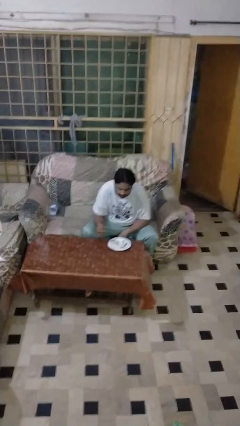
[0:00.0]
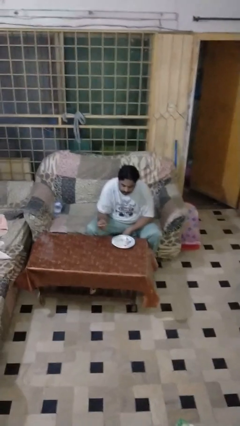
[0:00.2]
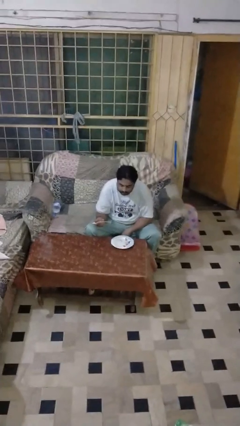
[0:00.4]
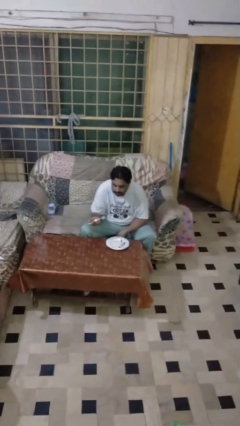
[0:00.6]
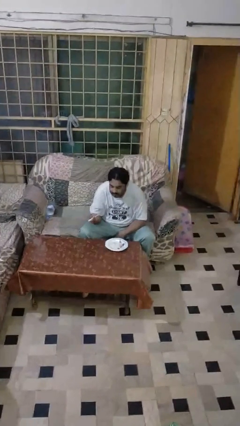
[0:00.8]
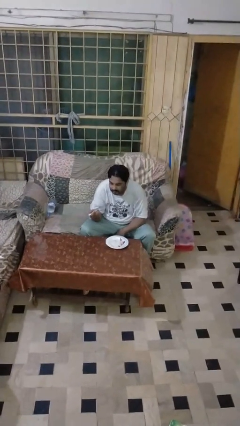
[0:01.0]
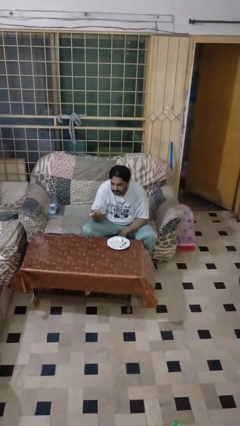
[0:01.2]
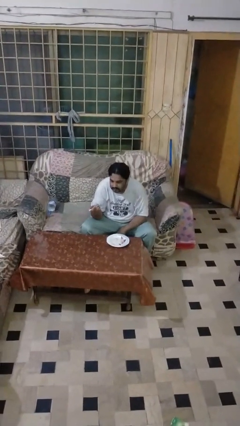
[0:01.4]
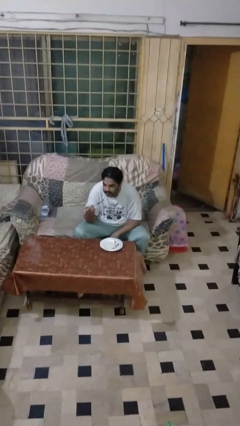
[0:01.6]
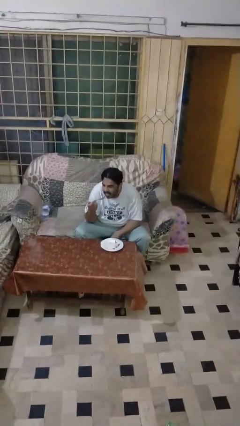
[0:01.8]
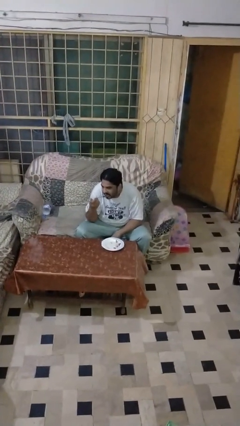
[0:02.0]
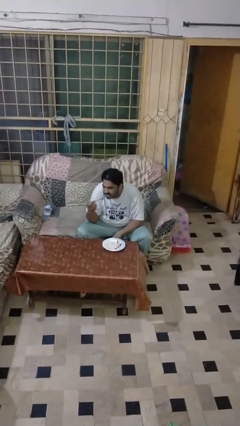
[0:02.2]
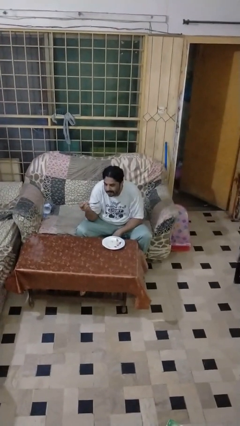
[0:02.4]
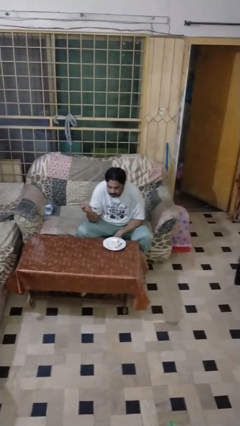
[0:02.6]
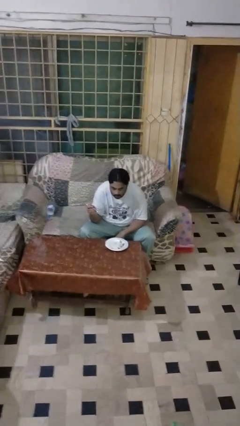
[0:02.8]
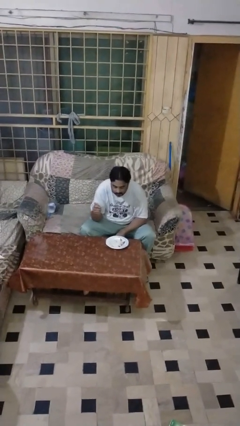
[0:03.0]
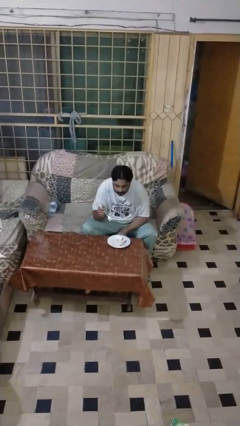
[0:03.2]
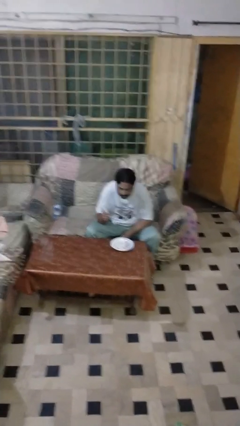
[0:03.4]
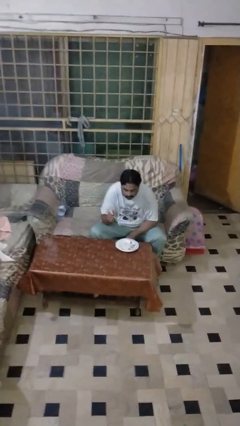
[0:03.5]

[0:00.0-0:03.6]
person eats with utensil

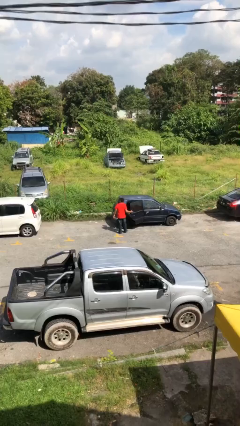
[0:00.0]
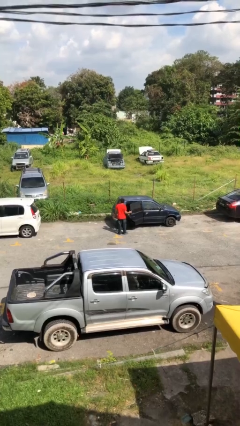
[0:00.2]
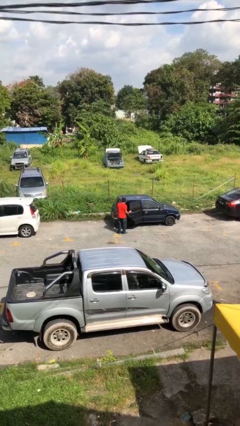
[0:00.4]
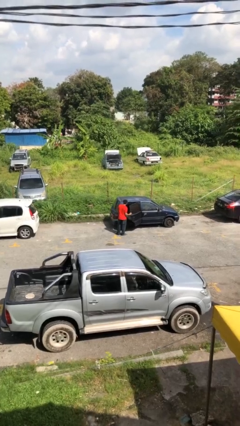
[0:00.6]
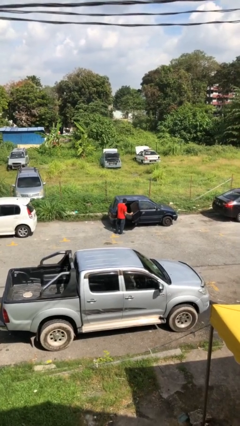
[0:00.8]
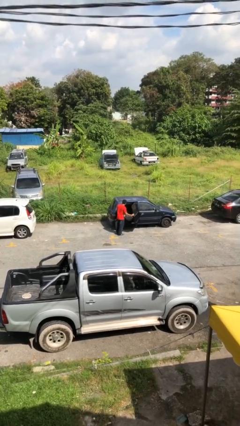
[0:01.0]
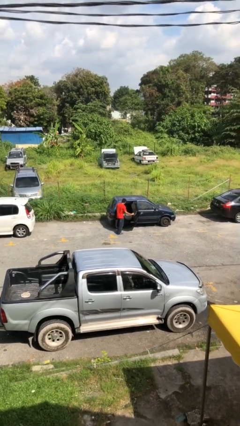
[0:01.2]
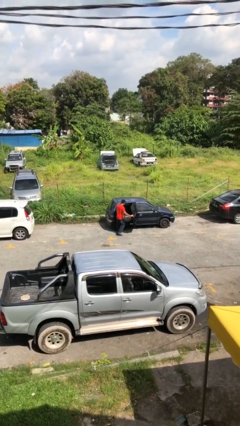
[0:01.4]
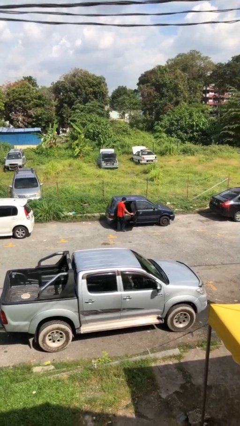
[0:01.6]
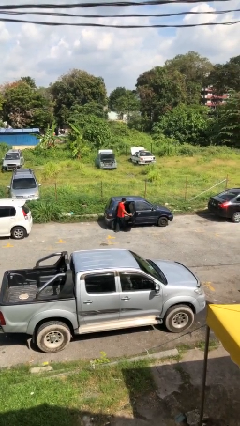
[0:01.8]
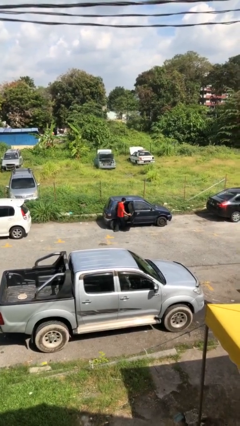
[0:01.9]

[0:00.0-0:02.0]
person opens car door

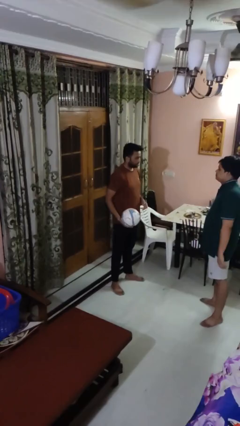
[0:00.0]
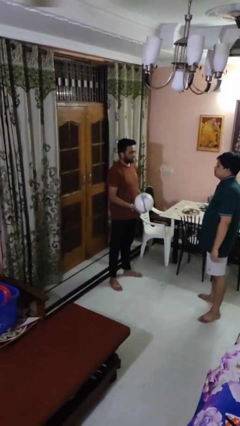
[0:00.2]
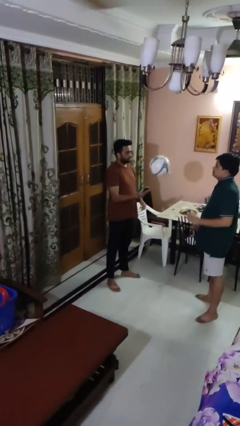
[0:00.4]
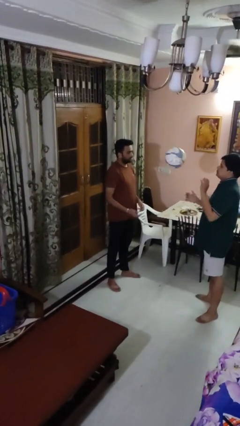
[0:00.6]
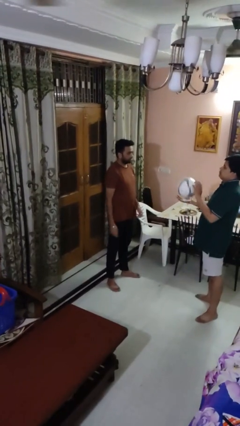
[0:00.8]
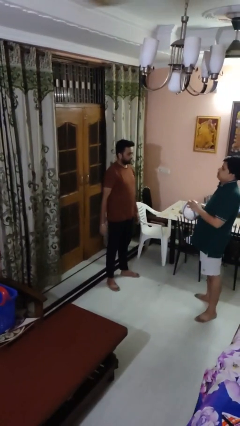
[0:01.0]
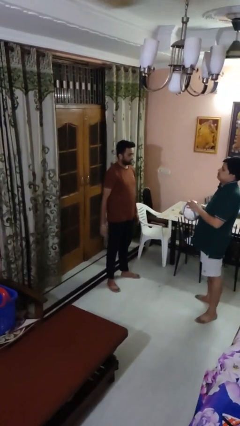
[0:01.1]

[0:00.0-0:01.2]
person throws object to person

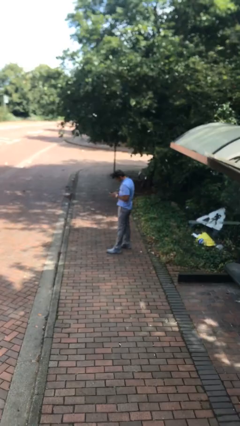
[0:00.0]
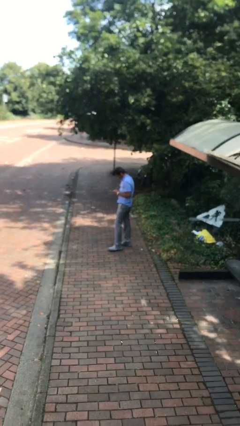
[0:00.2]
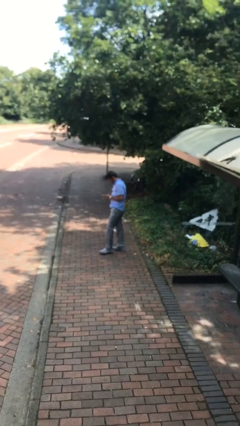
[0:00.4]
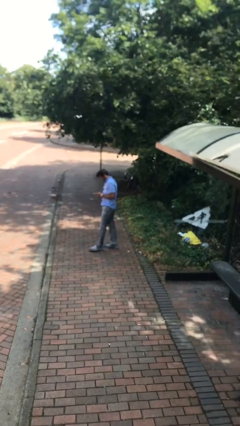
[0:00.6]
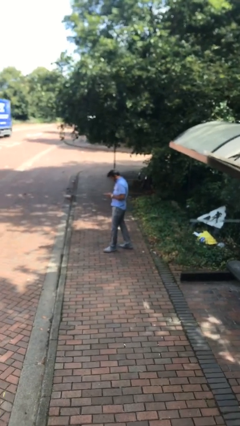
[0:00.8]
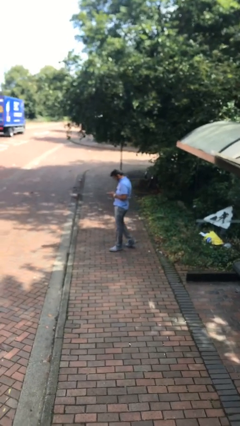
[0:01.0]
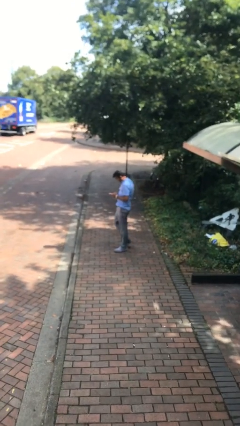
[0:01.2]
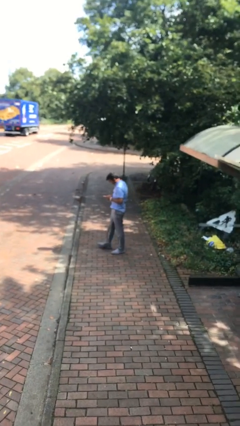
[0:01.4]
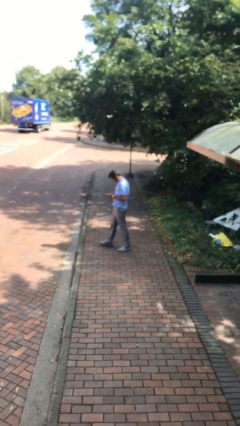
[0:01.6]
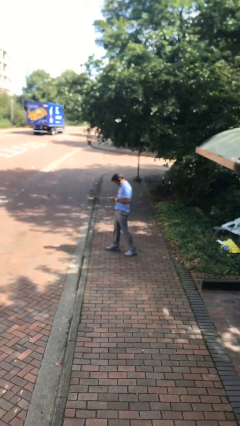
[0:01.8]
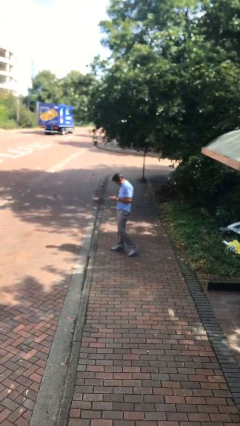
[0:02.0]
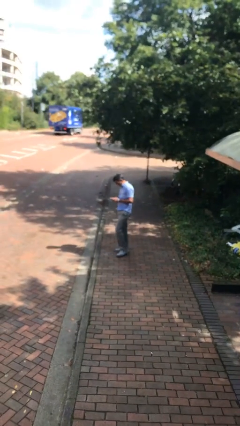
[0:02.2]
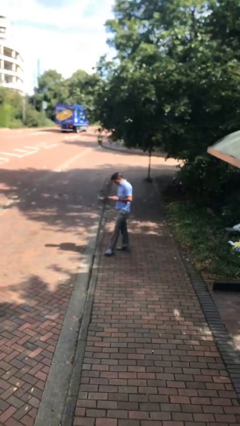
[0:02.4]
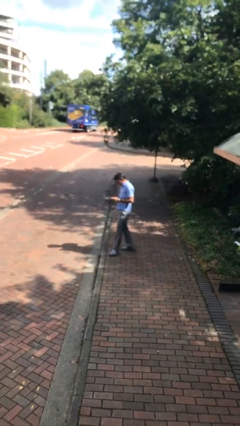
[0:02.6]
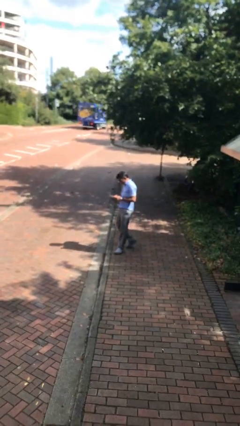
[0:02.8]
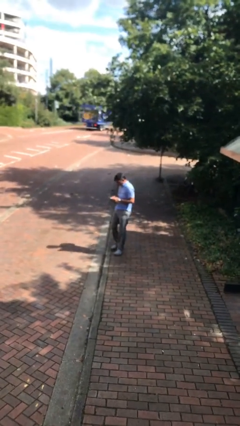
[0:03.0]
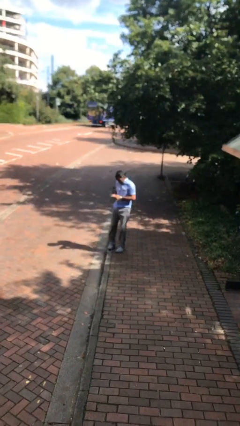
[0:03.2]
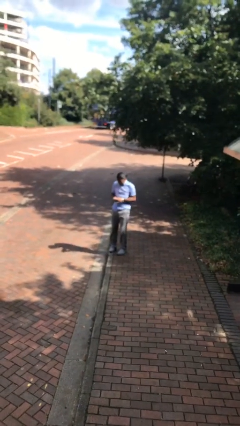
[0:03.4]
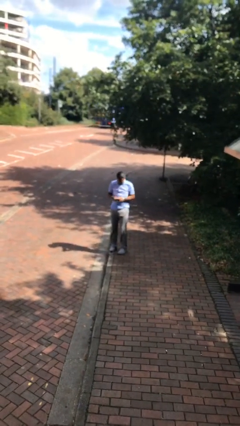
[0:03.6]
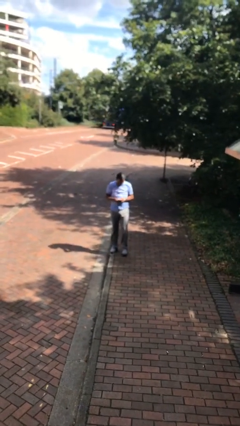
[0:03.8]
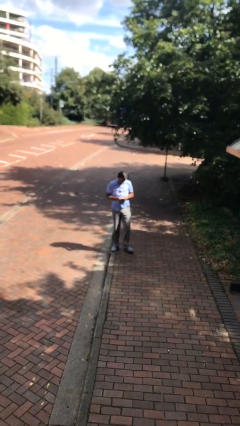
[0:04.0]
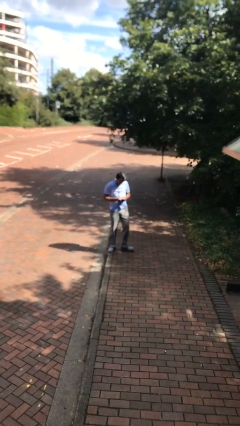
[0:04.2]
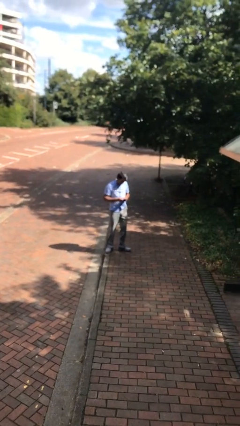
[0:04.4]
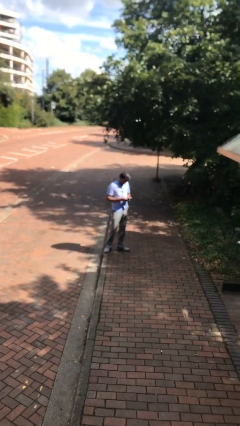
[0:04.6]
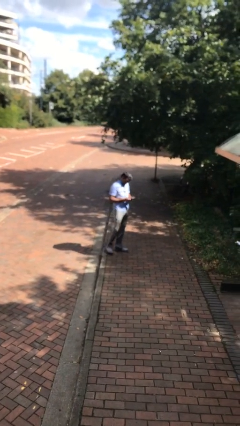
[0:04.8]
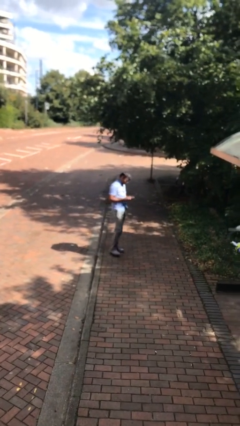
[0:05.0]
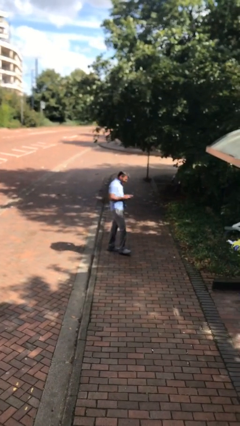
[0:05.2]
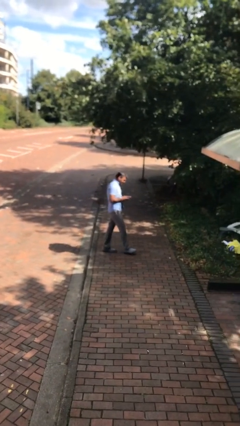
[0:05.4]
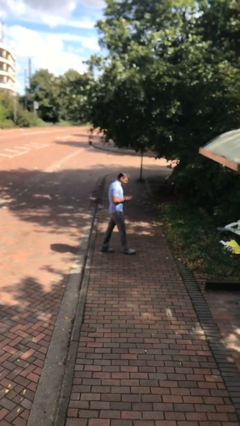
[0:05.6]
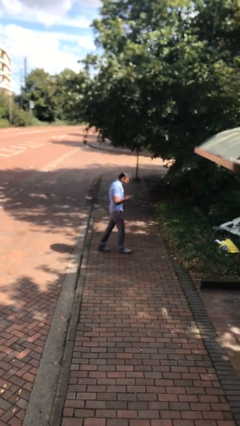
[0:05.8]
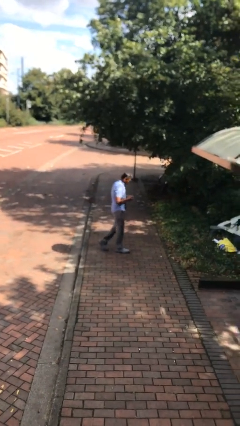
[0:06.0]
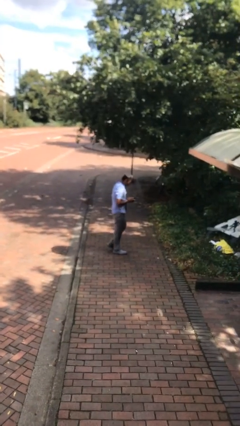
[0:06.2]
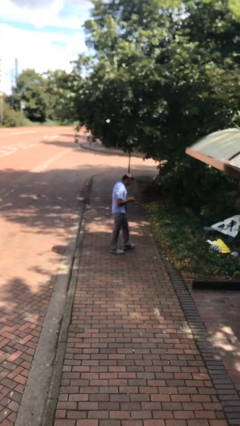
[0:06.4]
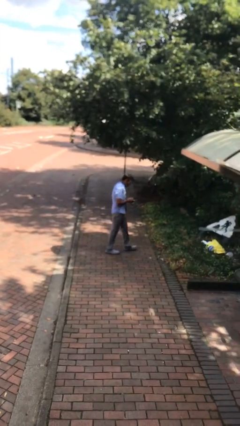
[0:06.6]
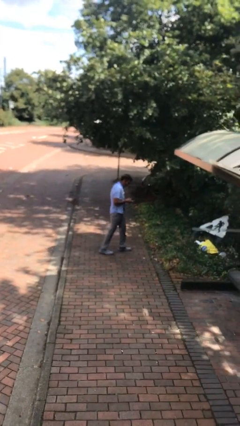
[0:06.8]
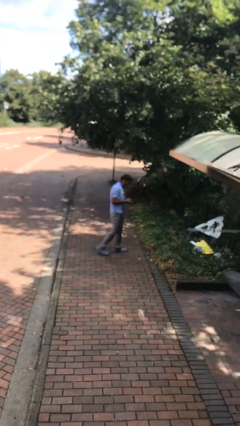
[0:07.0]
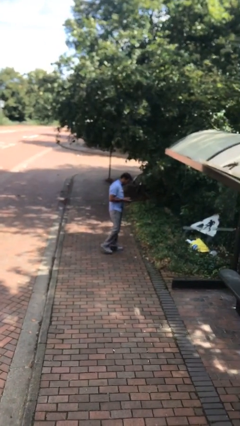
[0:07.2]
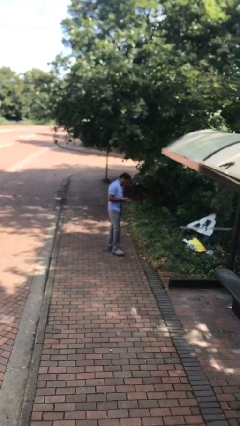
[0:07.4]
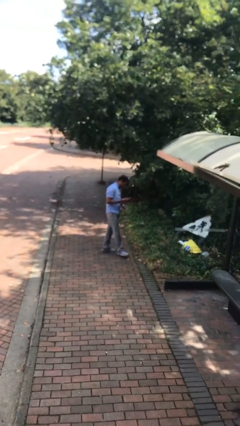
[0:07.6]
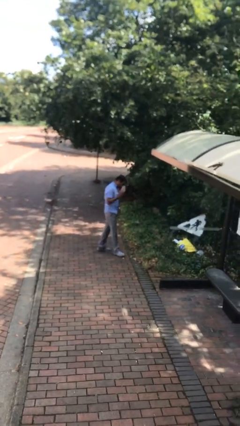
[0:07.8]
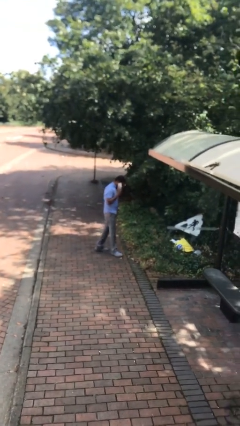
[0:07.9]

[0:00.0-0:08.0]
person texts on phone

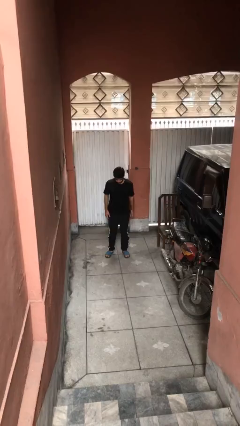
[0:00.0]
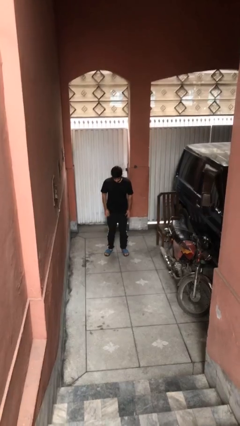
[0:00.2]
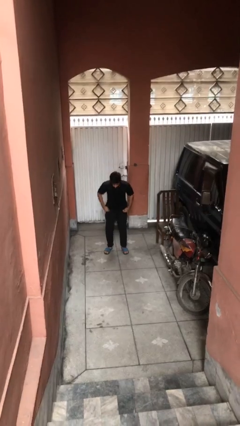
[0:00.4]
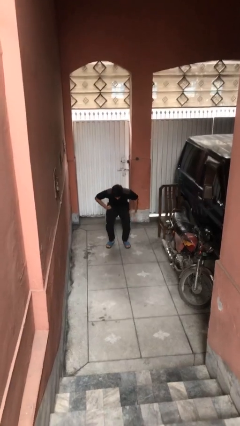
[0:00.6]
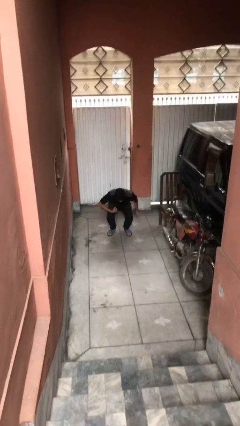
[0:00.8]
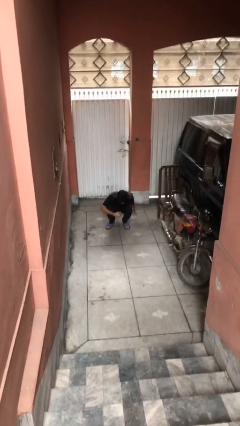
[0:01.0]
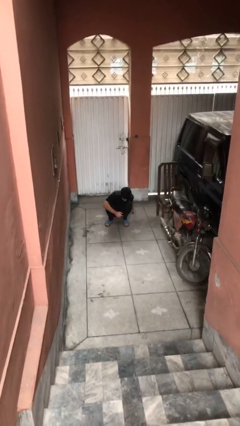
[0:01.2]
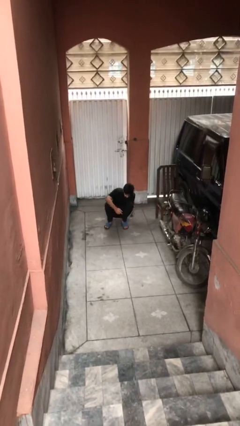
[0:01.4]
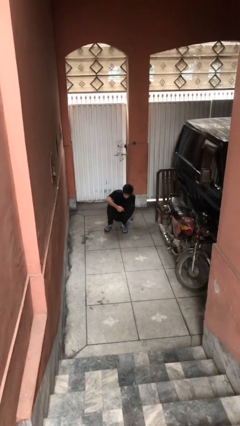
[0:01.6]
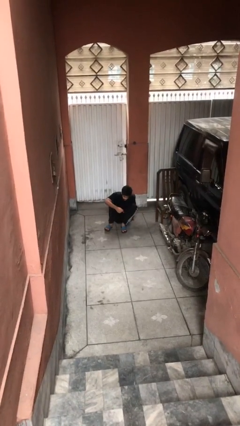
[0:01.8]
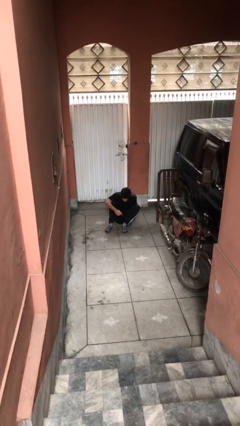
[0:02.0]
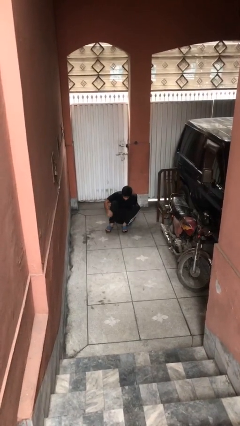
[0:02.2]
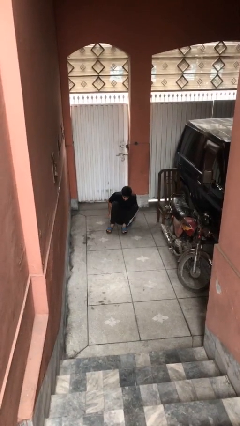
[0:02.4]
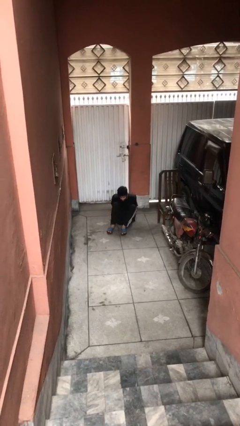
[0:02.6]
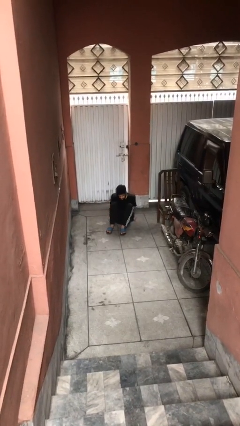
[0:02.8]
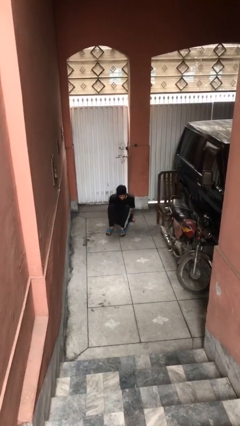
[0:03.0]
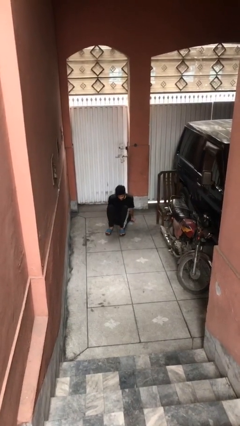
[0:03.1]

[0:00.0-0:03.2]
person sits down
